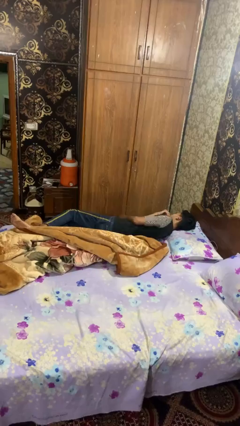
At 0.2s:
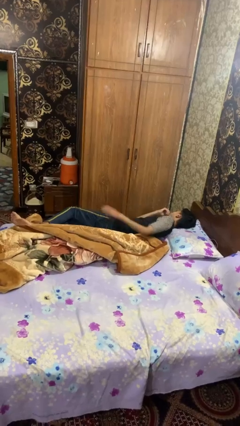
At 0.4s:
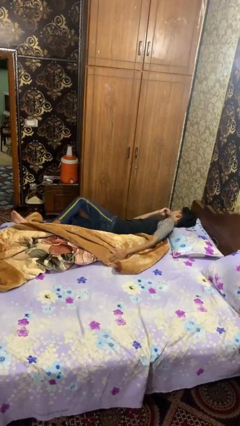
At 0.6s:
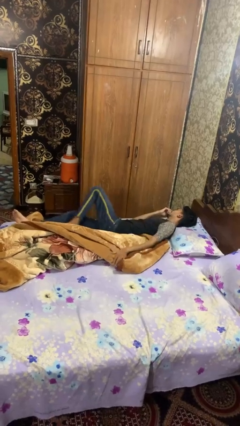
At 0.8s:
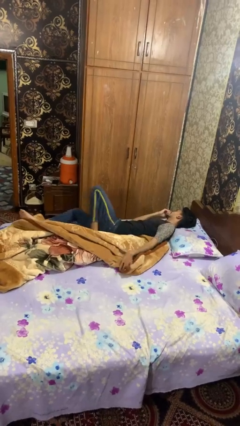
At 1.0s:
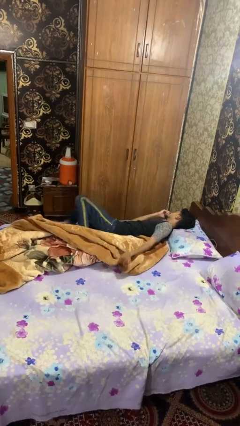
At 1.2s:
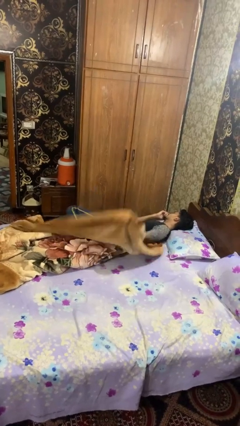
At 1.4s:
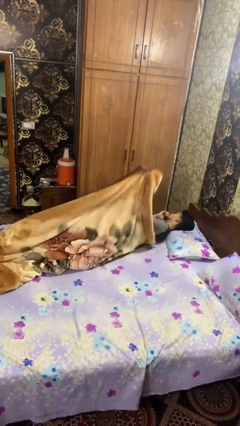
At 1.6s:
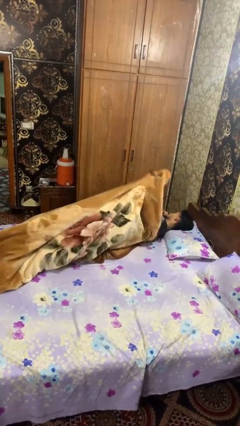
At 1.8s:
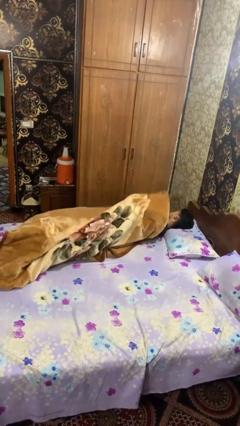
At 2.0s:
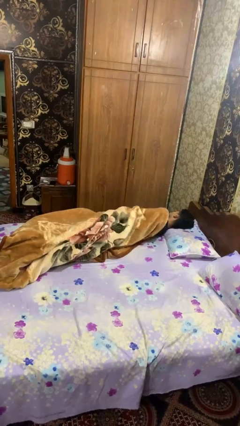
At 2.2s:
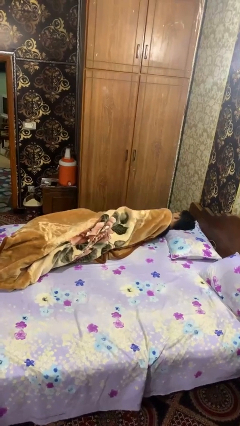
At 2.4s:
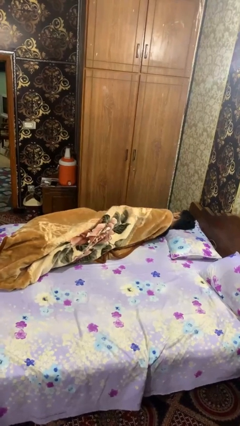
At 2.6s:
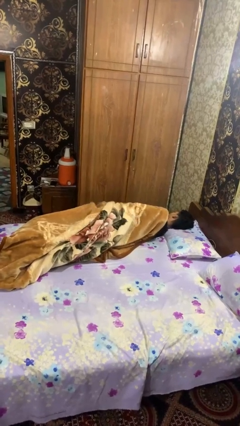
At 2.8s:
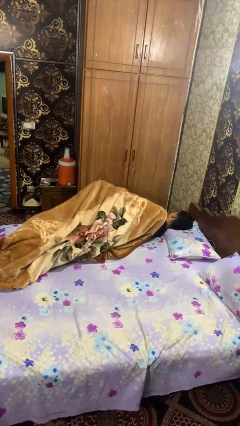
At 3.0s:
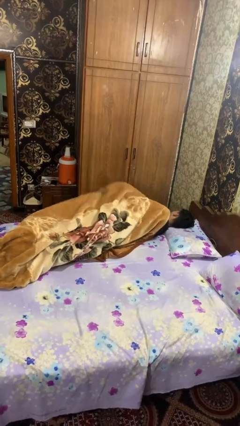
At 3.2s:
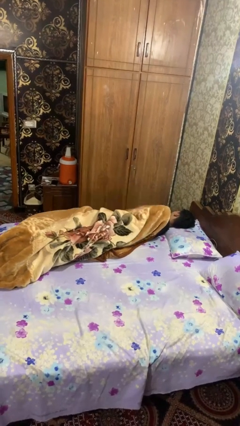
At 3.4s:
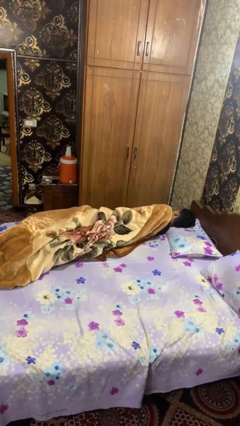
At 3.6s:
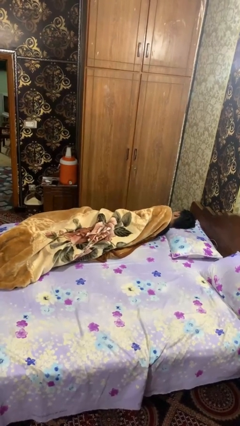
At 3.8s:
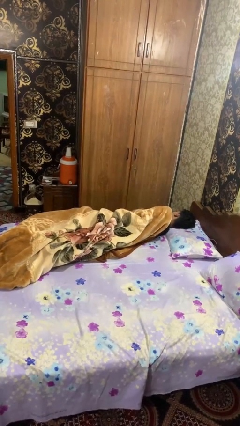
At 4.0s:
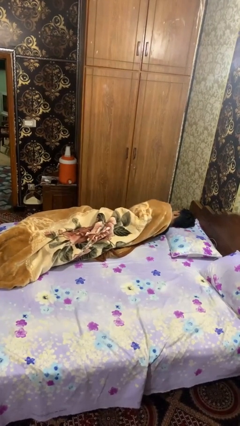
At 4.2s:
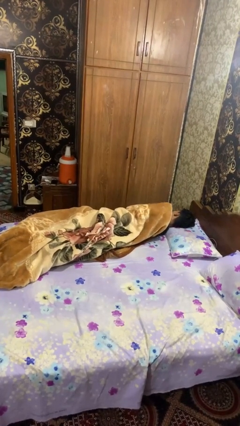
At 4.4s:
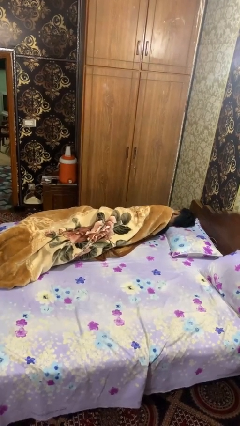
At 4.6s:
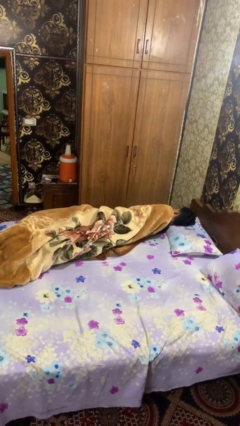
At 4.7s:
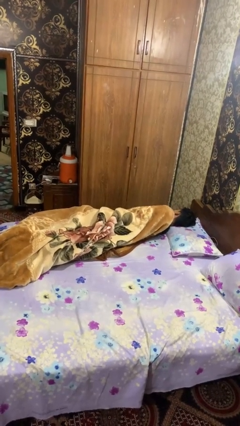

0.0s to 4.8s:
person covers with blanket

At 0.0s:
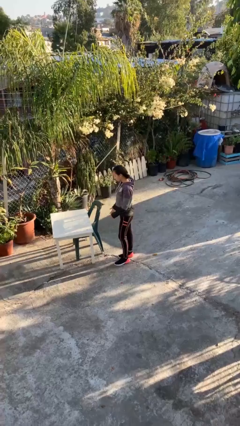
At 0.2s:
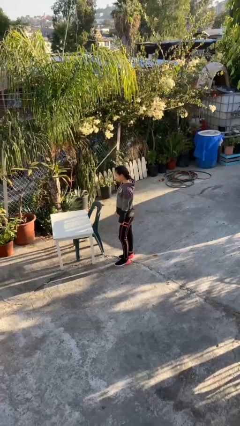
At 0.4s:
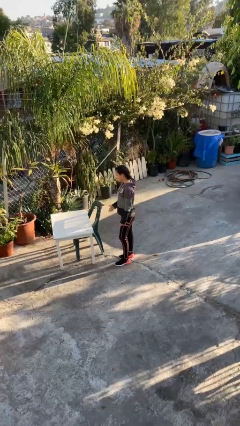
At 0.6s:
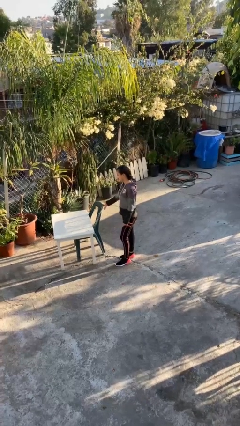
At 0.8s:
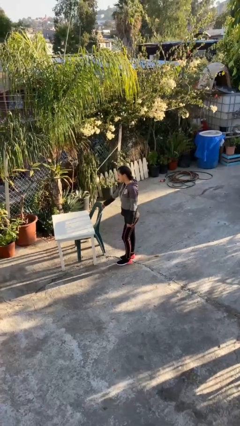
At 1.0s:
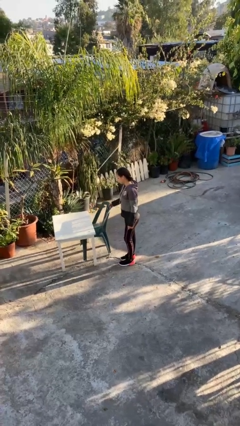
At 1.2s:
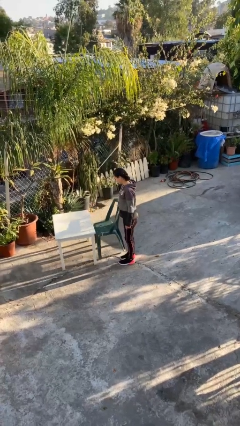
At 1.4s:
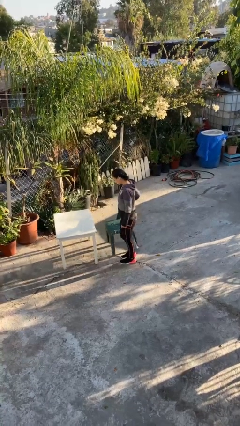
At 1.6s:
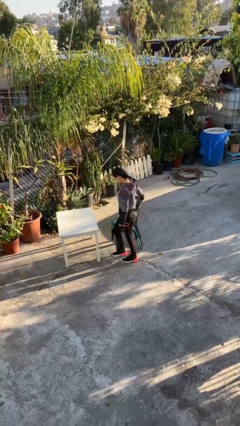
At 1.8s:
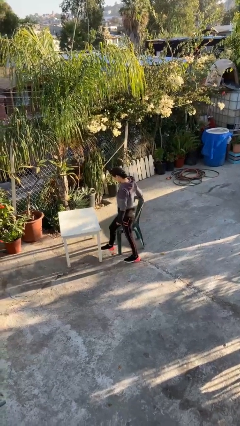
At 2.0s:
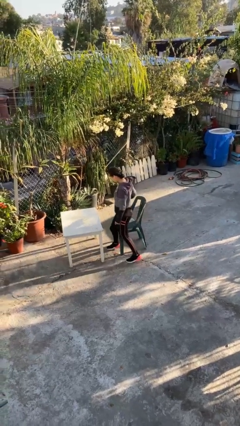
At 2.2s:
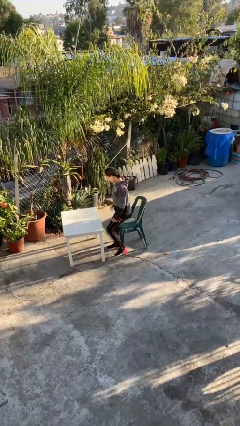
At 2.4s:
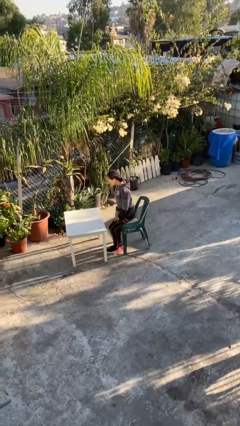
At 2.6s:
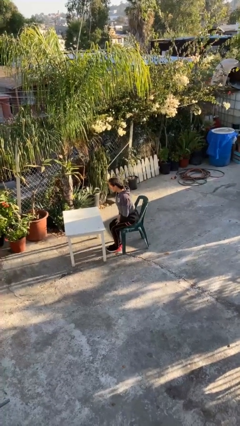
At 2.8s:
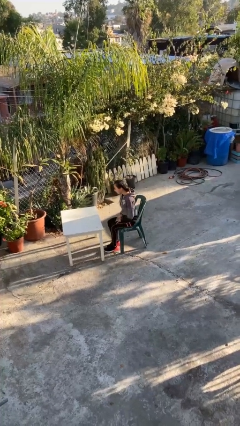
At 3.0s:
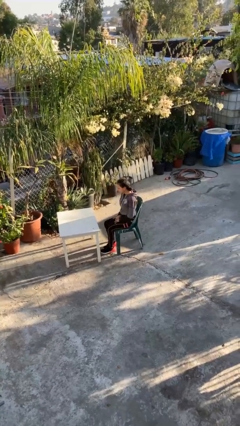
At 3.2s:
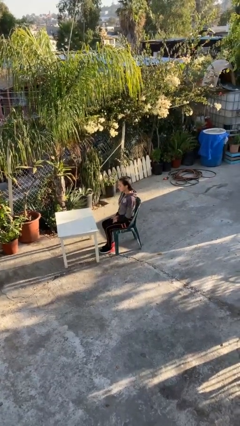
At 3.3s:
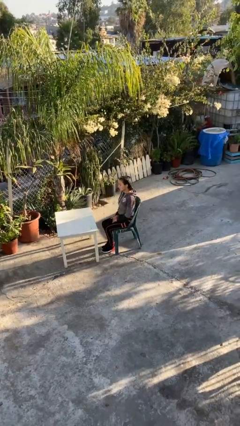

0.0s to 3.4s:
person sits down

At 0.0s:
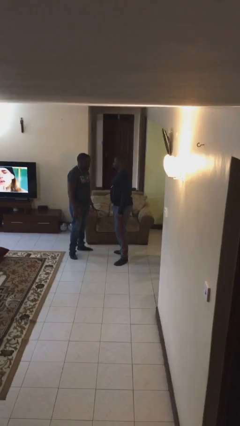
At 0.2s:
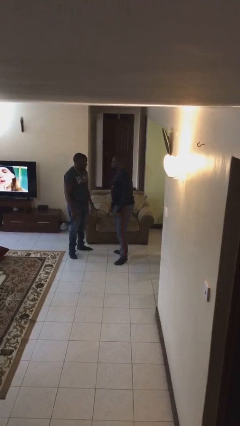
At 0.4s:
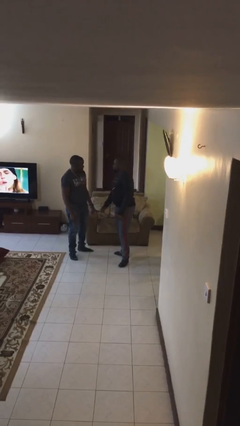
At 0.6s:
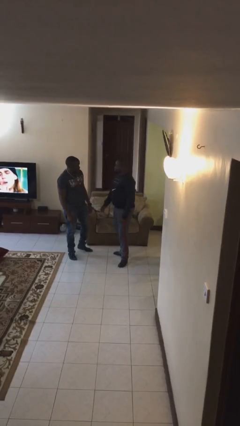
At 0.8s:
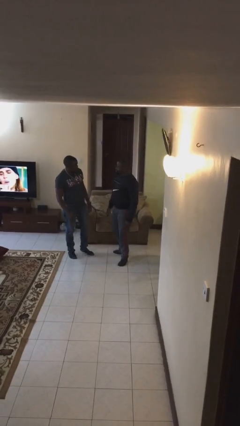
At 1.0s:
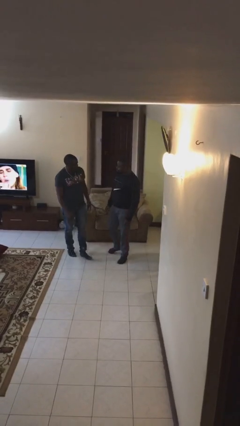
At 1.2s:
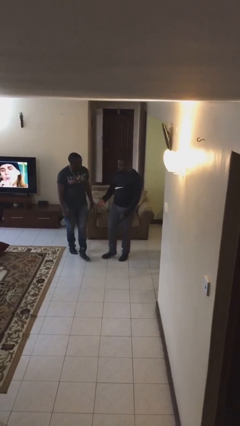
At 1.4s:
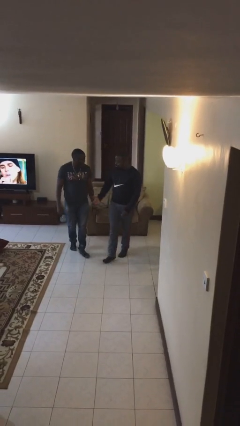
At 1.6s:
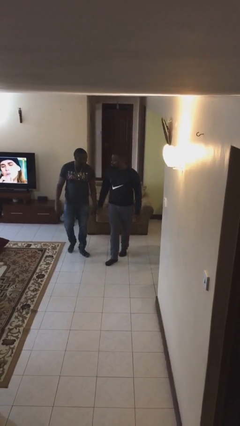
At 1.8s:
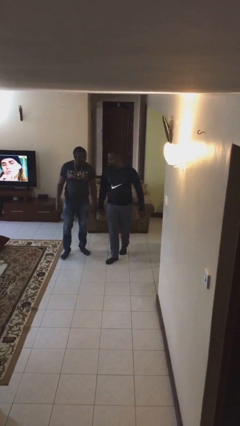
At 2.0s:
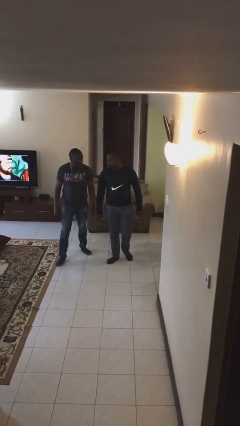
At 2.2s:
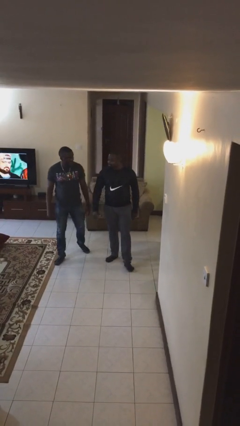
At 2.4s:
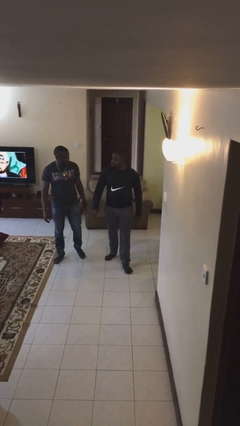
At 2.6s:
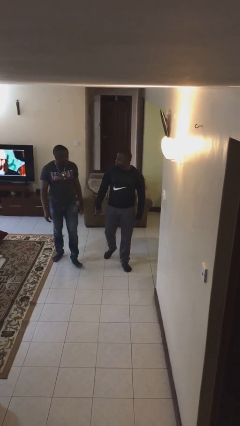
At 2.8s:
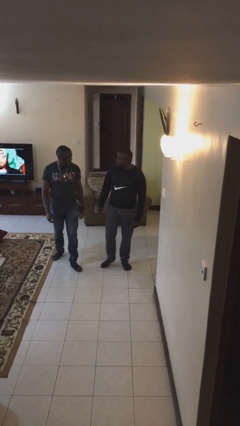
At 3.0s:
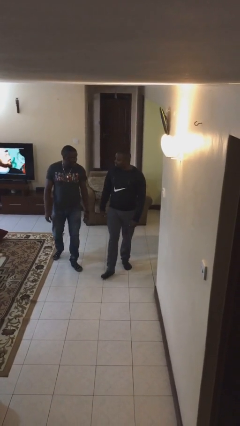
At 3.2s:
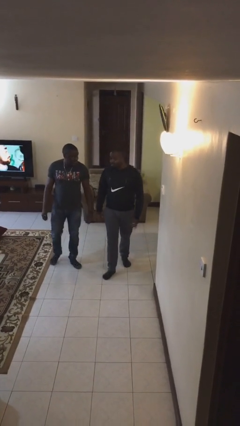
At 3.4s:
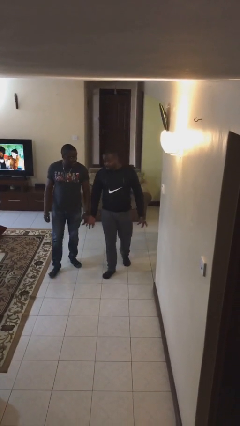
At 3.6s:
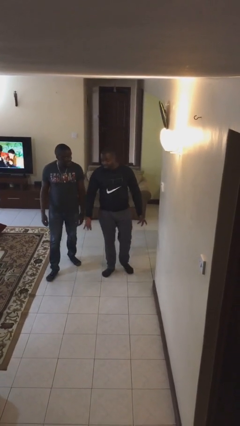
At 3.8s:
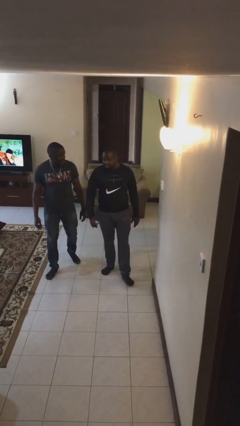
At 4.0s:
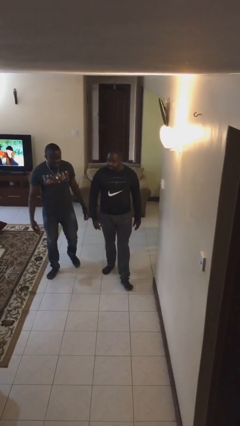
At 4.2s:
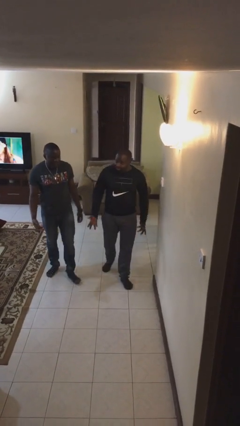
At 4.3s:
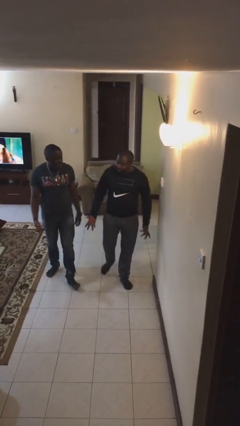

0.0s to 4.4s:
person talks to person

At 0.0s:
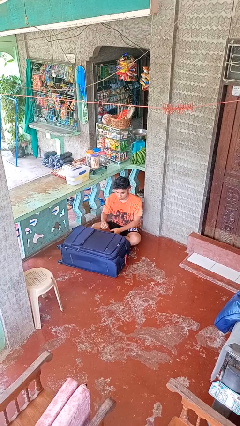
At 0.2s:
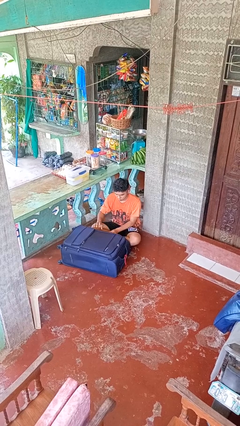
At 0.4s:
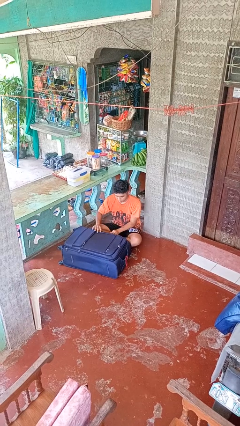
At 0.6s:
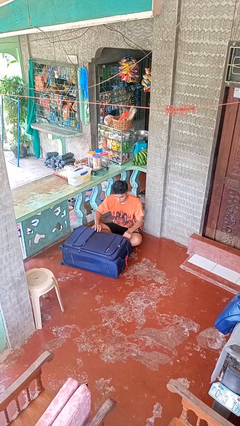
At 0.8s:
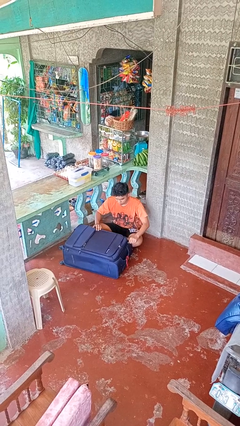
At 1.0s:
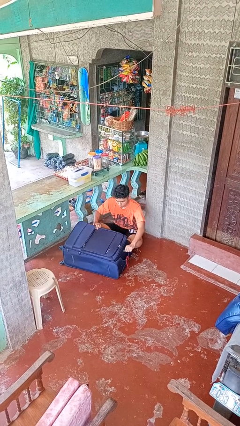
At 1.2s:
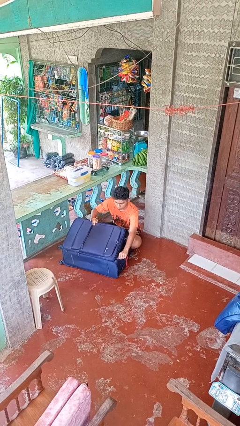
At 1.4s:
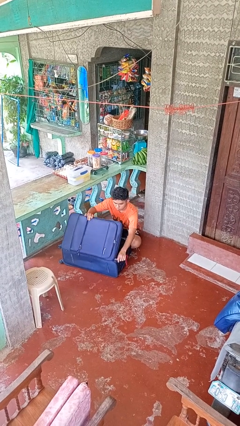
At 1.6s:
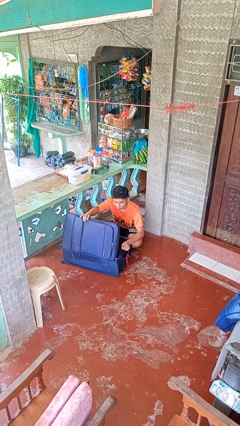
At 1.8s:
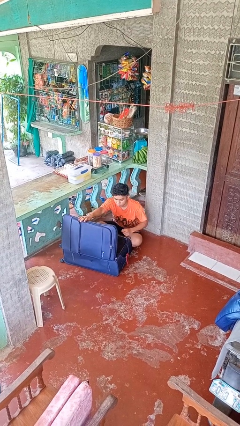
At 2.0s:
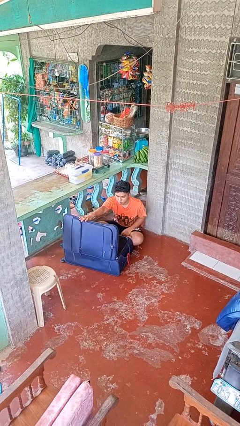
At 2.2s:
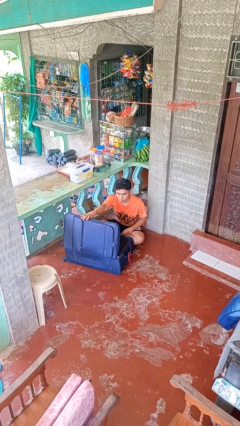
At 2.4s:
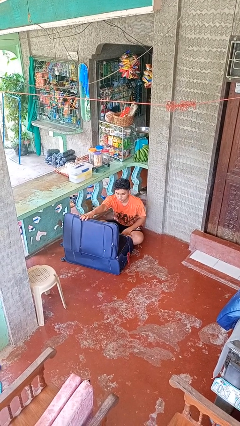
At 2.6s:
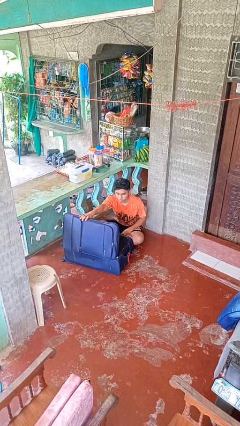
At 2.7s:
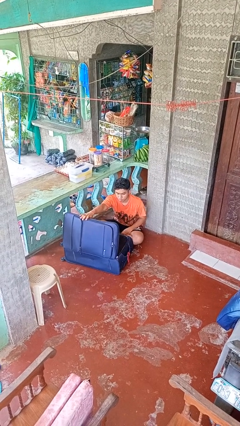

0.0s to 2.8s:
person opens suitcase

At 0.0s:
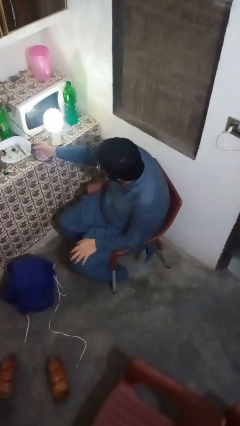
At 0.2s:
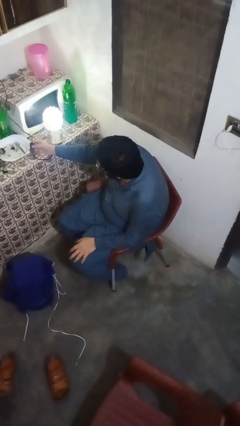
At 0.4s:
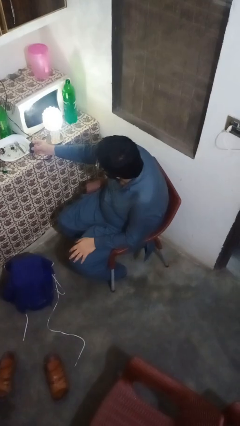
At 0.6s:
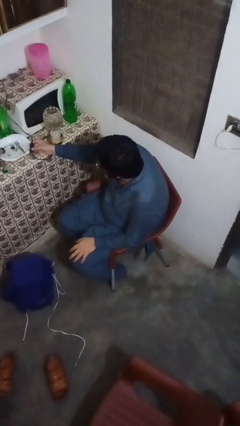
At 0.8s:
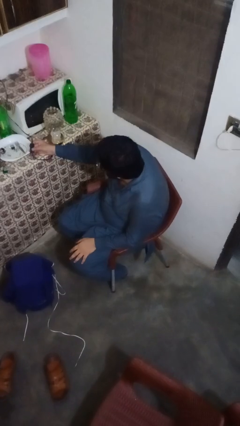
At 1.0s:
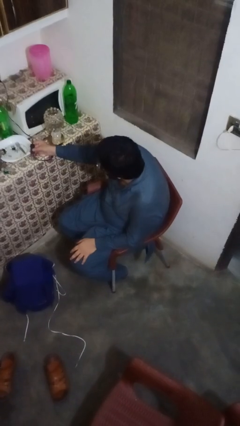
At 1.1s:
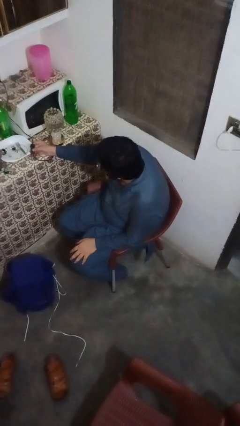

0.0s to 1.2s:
person turns off lamp

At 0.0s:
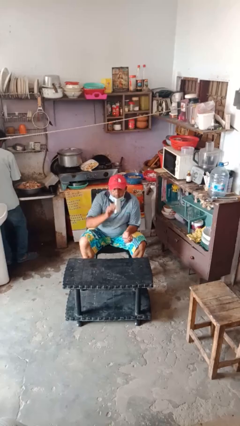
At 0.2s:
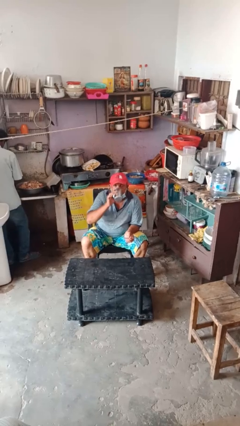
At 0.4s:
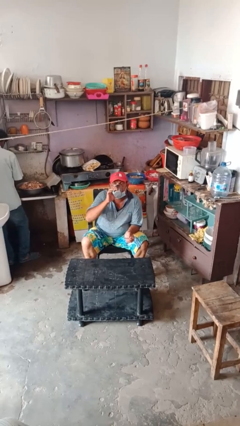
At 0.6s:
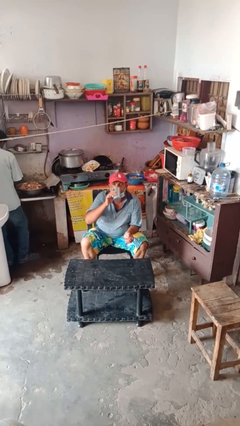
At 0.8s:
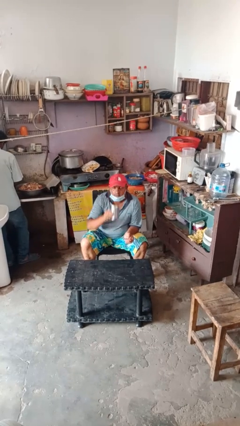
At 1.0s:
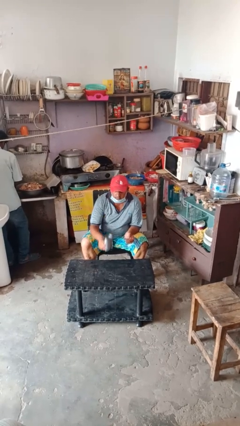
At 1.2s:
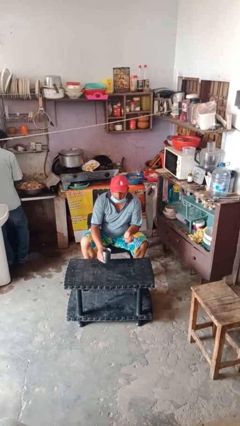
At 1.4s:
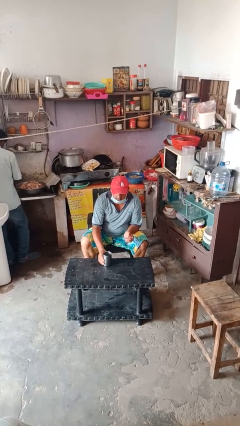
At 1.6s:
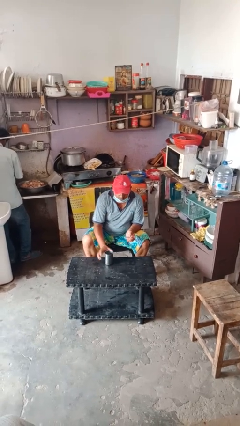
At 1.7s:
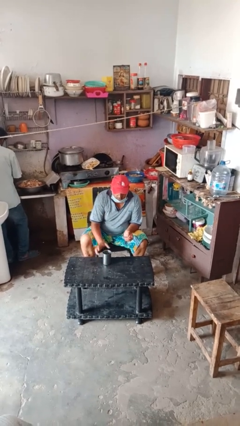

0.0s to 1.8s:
person drinks from cup
